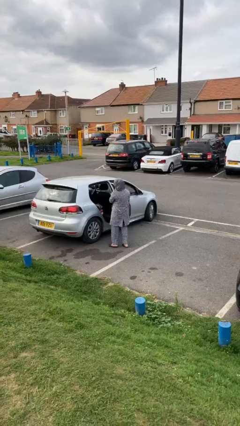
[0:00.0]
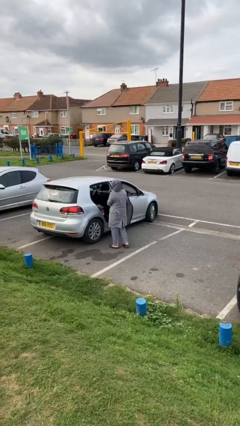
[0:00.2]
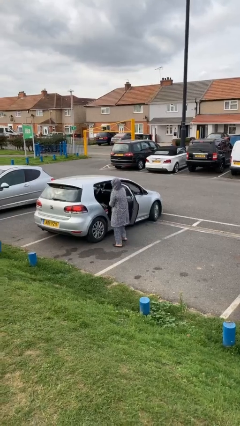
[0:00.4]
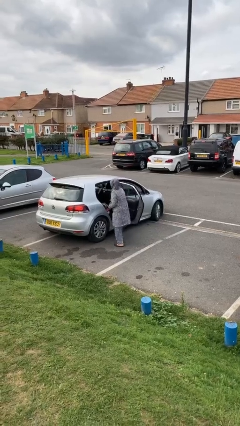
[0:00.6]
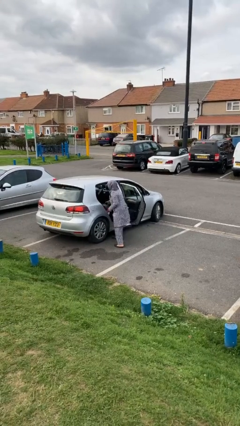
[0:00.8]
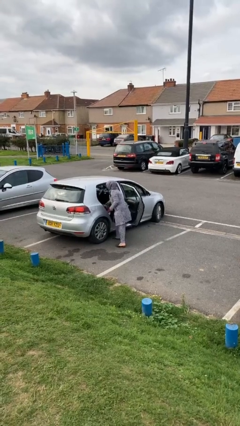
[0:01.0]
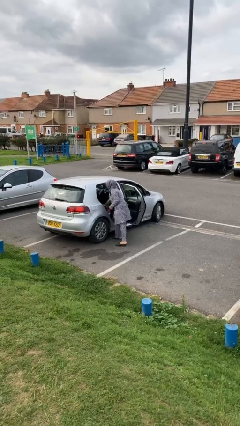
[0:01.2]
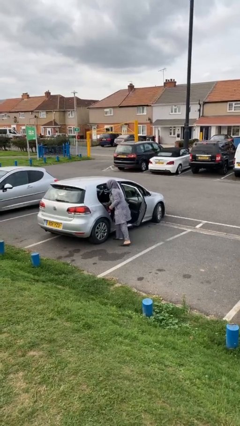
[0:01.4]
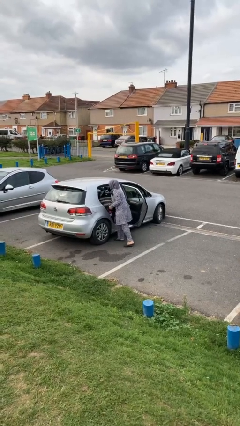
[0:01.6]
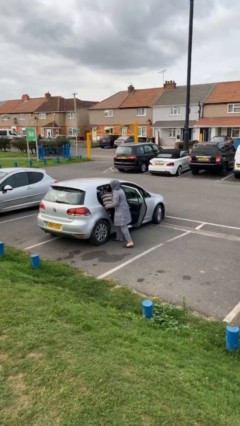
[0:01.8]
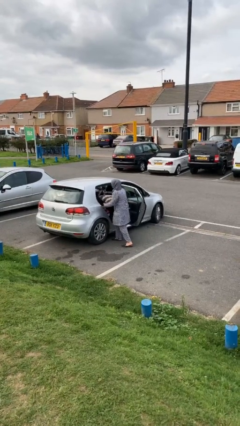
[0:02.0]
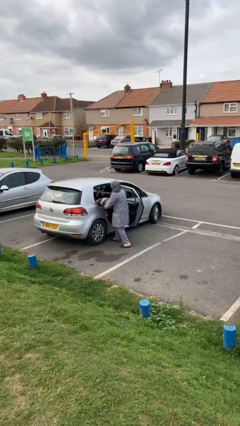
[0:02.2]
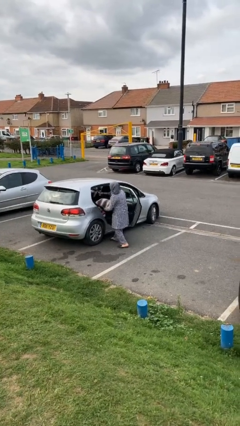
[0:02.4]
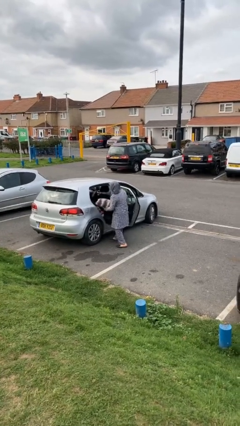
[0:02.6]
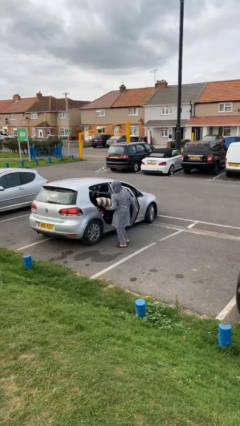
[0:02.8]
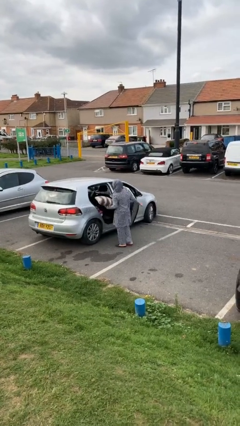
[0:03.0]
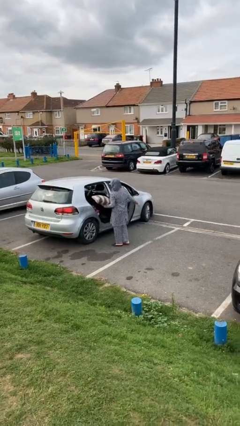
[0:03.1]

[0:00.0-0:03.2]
person unloads car

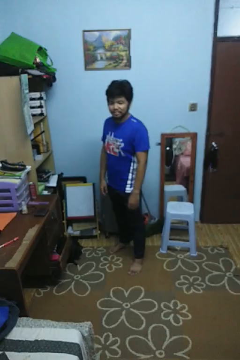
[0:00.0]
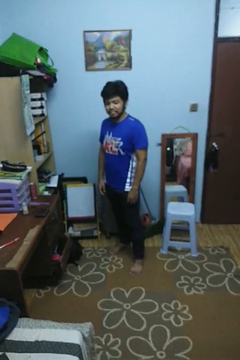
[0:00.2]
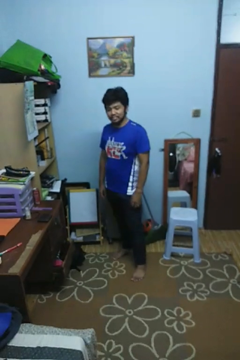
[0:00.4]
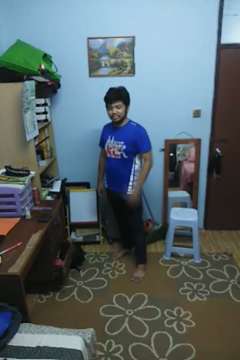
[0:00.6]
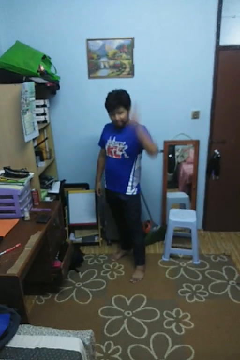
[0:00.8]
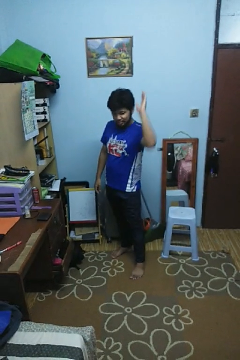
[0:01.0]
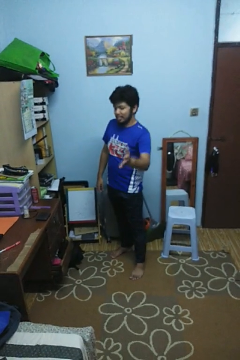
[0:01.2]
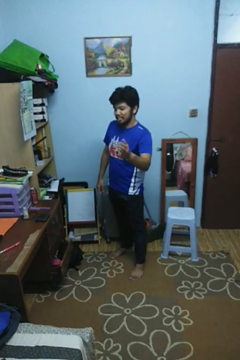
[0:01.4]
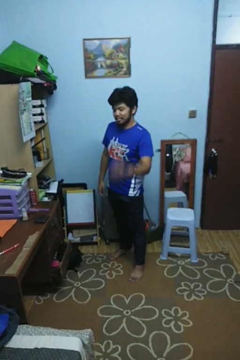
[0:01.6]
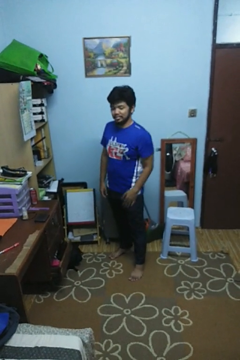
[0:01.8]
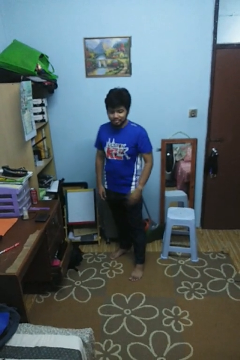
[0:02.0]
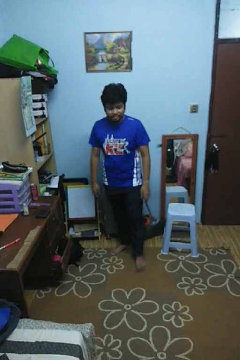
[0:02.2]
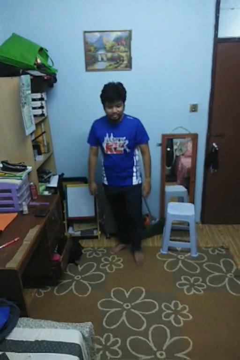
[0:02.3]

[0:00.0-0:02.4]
person karate chop

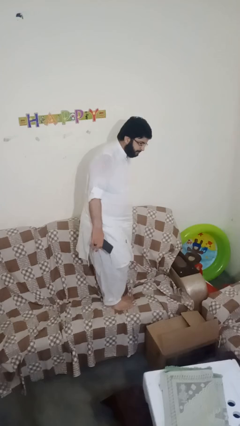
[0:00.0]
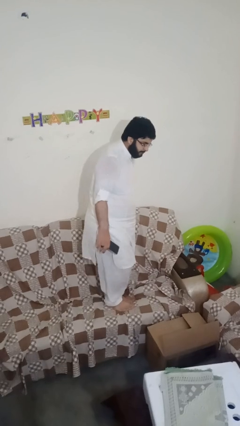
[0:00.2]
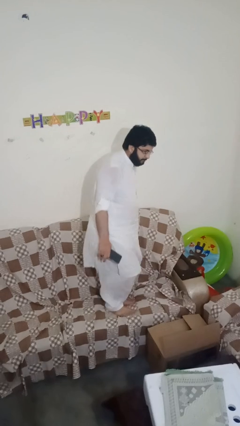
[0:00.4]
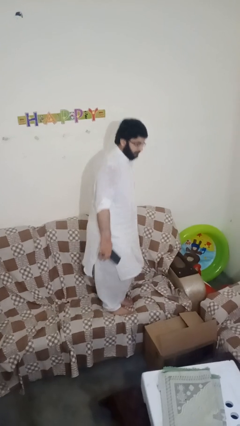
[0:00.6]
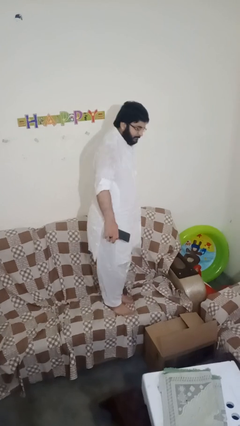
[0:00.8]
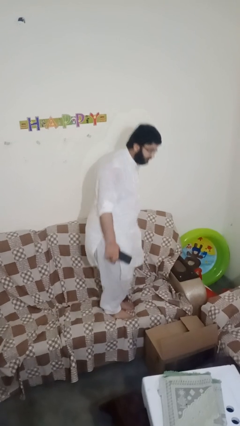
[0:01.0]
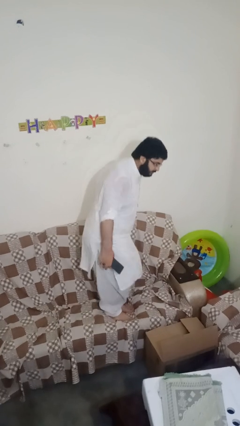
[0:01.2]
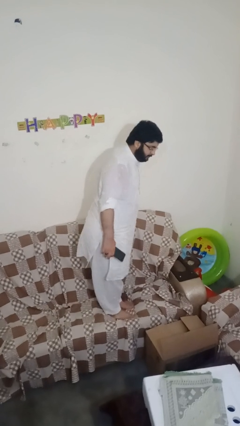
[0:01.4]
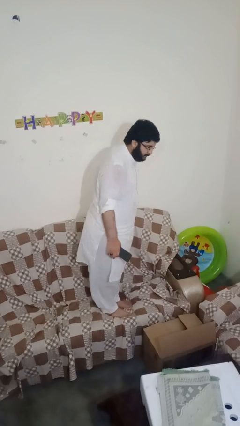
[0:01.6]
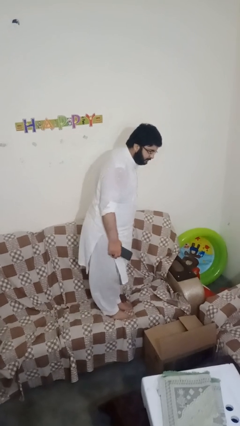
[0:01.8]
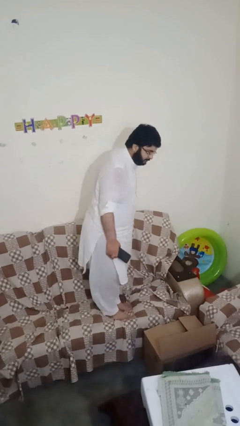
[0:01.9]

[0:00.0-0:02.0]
person jumps on couch

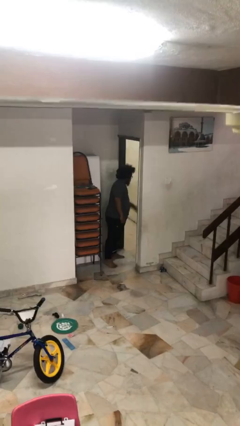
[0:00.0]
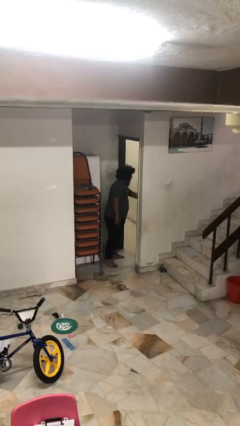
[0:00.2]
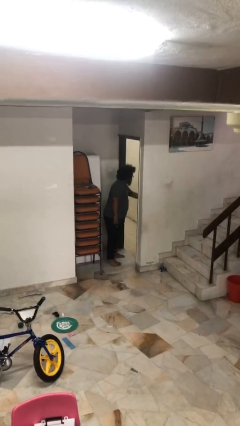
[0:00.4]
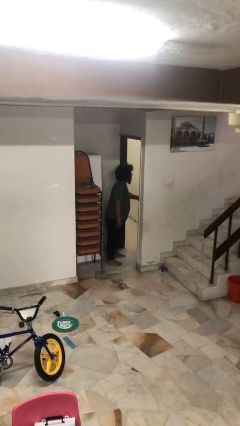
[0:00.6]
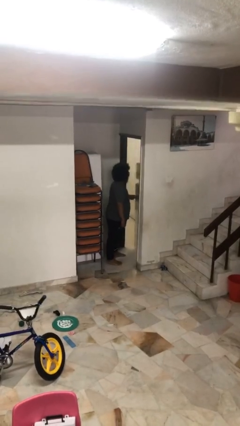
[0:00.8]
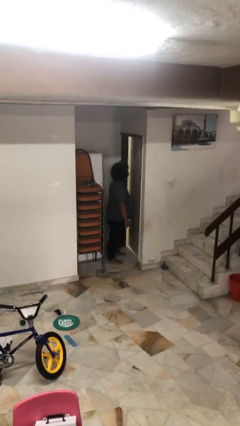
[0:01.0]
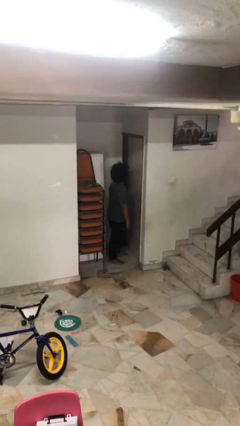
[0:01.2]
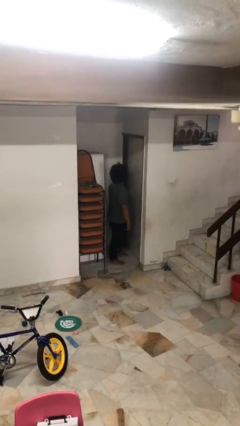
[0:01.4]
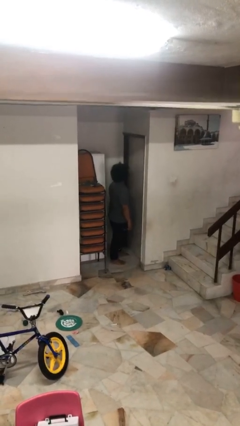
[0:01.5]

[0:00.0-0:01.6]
person closes facility door

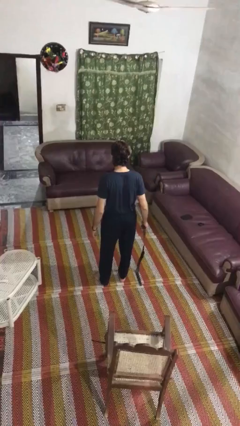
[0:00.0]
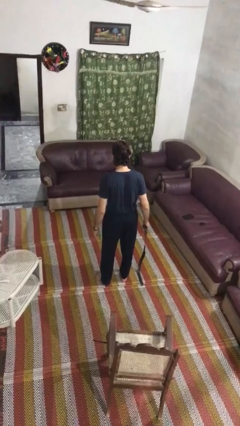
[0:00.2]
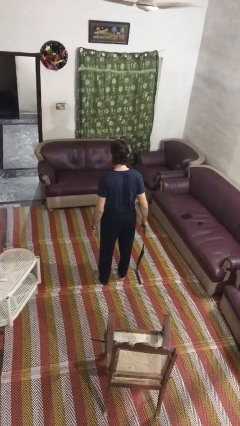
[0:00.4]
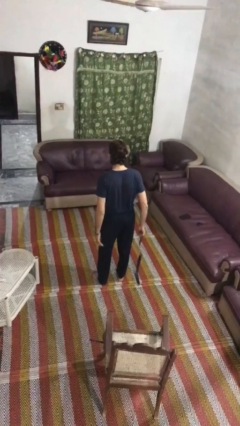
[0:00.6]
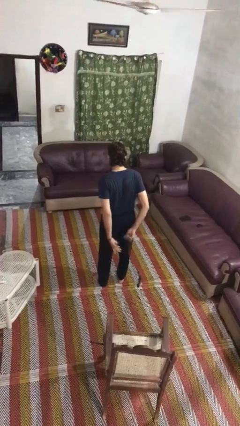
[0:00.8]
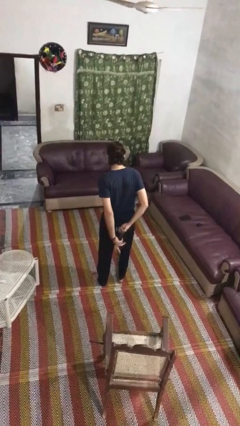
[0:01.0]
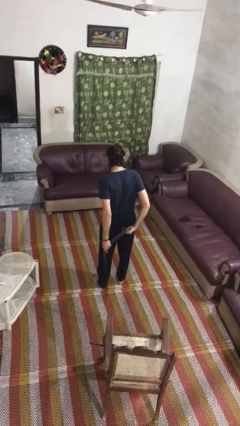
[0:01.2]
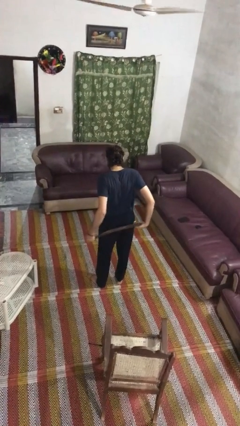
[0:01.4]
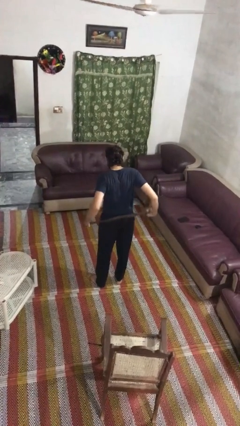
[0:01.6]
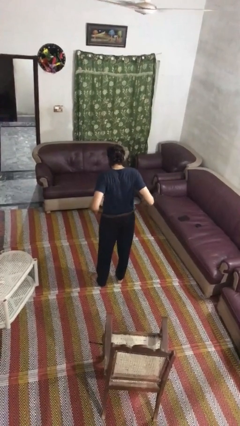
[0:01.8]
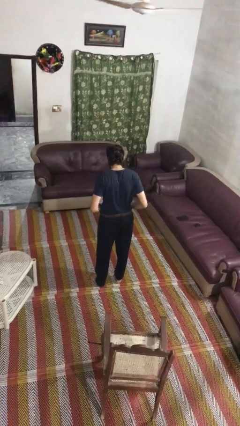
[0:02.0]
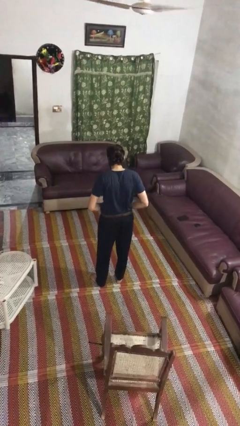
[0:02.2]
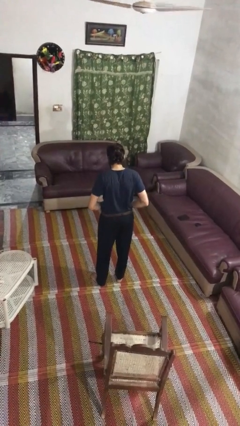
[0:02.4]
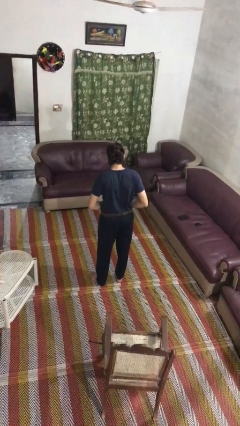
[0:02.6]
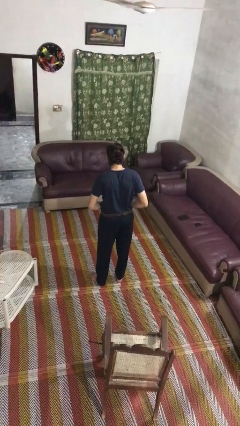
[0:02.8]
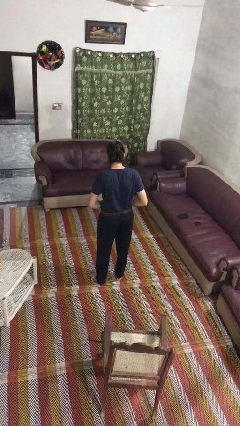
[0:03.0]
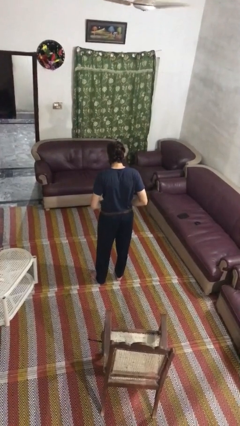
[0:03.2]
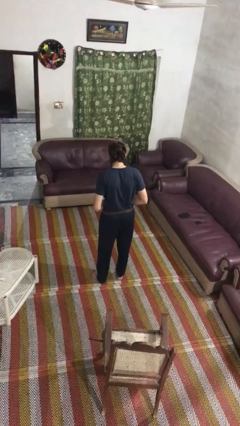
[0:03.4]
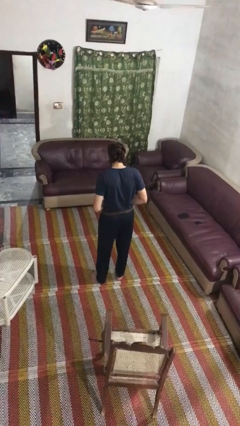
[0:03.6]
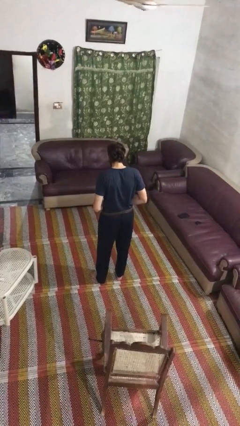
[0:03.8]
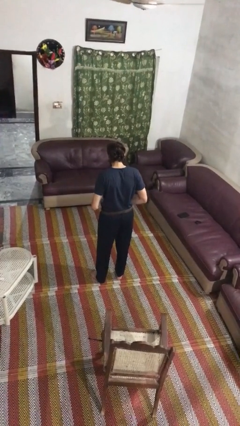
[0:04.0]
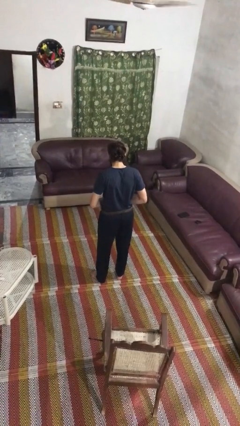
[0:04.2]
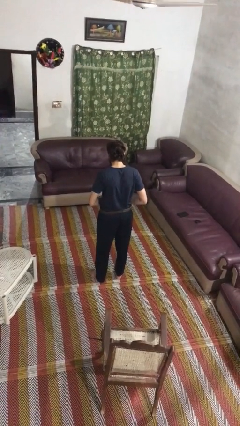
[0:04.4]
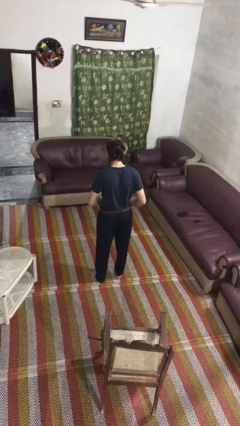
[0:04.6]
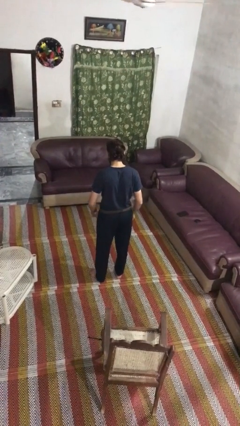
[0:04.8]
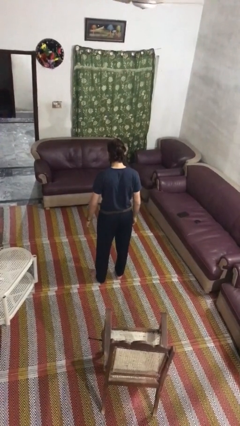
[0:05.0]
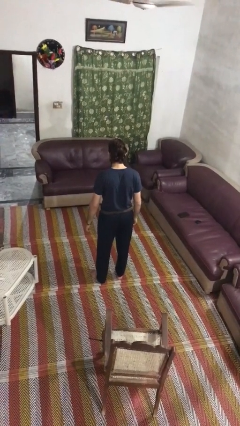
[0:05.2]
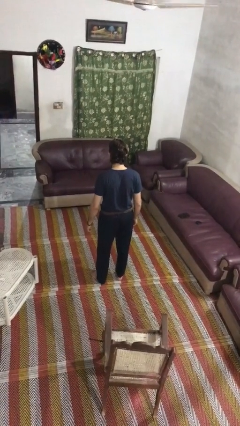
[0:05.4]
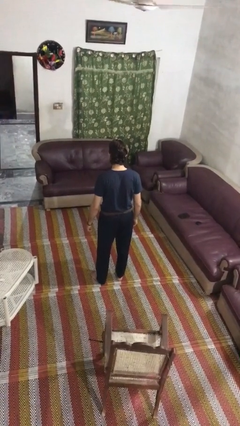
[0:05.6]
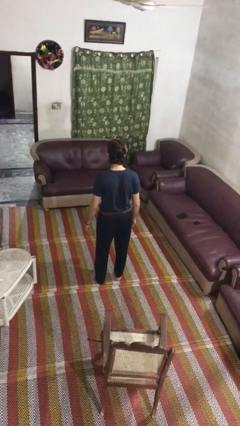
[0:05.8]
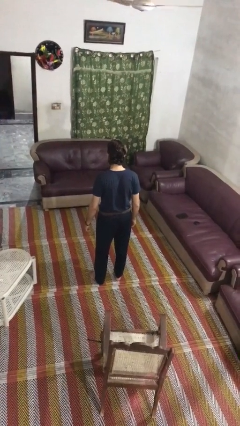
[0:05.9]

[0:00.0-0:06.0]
person puts on belt

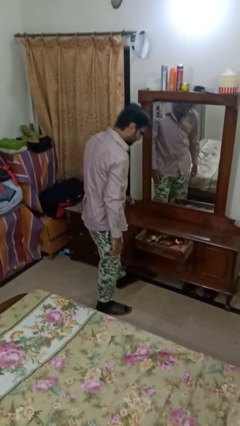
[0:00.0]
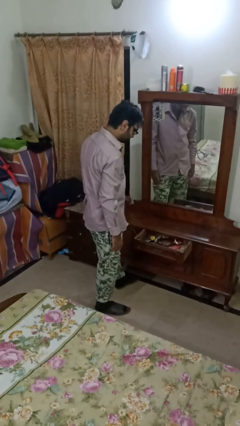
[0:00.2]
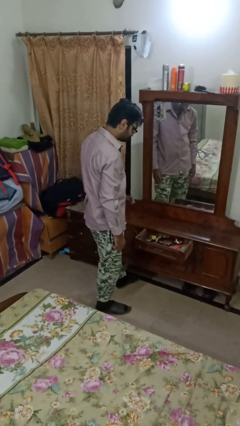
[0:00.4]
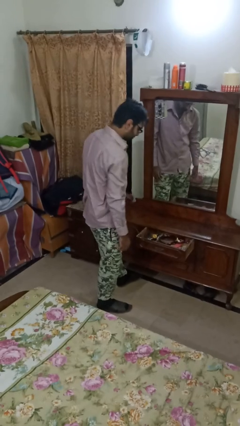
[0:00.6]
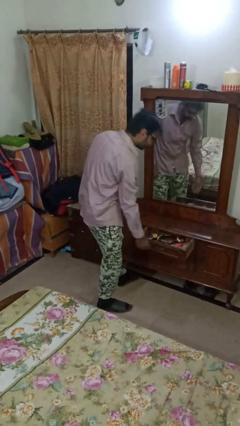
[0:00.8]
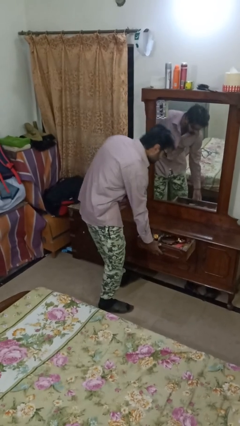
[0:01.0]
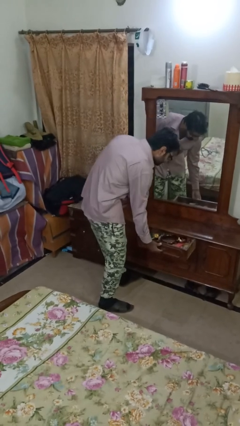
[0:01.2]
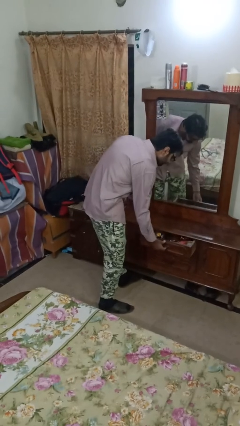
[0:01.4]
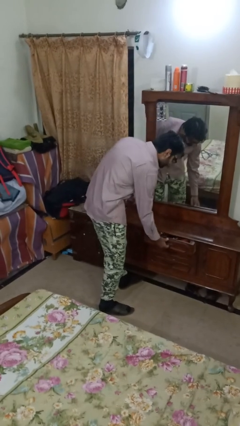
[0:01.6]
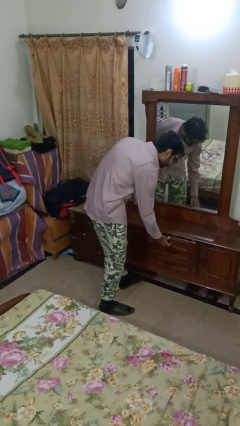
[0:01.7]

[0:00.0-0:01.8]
person closes dresser drawer

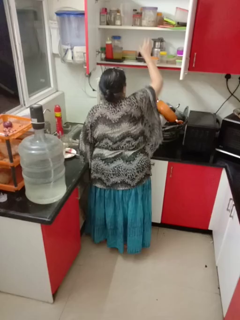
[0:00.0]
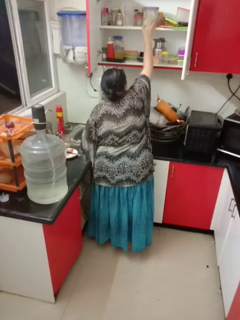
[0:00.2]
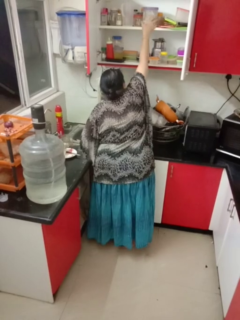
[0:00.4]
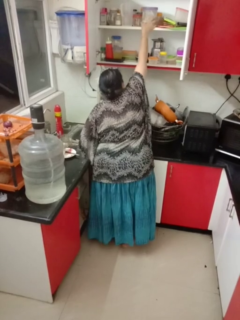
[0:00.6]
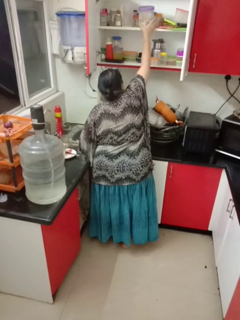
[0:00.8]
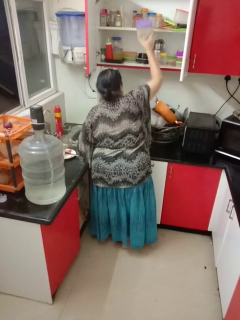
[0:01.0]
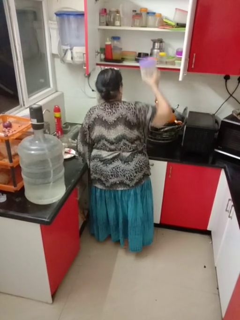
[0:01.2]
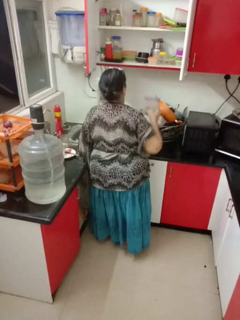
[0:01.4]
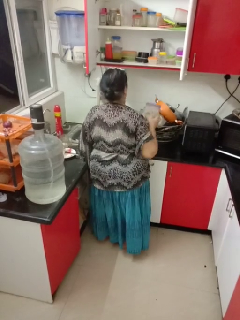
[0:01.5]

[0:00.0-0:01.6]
person takes object from cabinet
